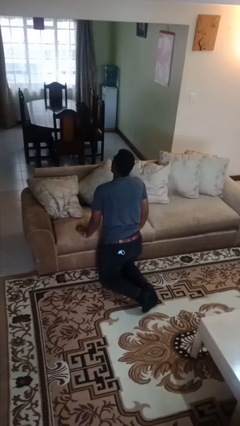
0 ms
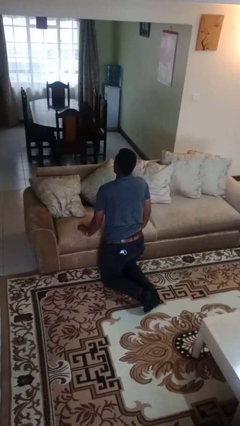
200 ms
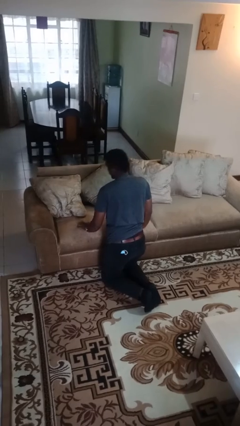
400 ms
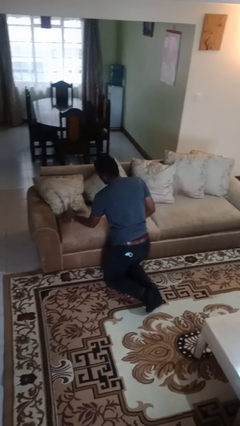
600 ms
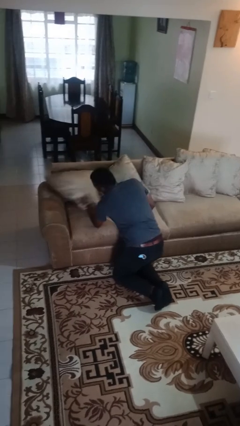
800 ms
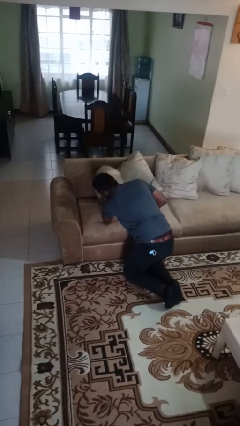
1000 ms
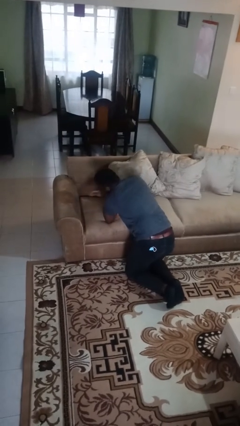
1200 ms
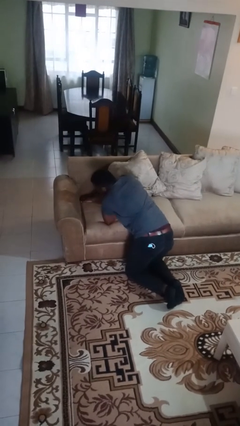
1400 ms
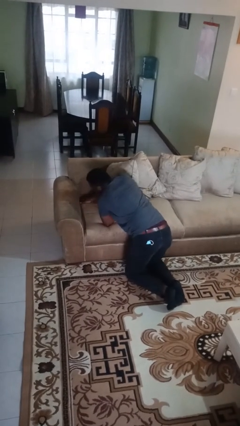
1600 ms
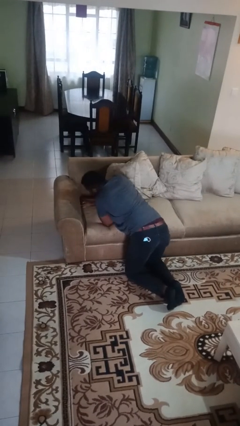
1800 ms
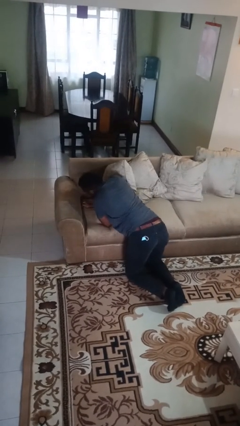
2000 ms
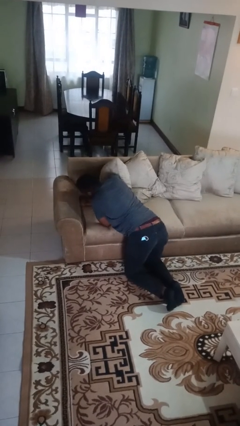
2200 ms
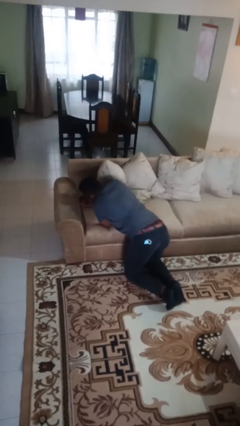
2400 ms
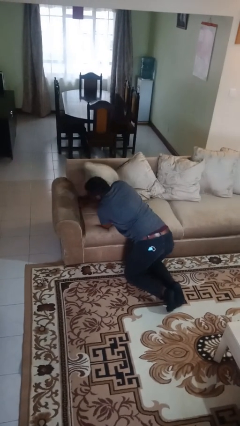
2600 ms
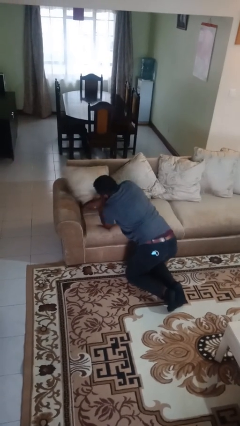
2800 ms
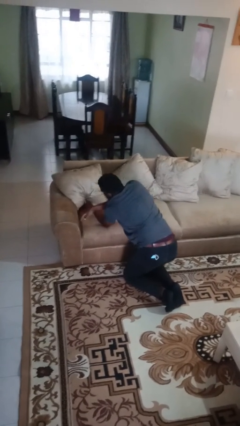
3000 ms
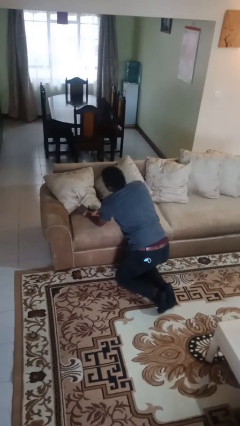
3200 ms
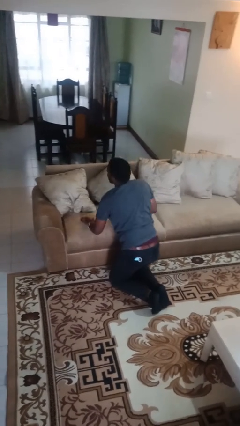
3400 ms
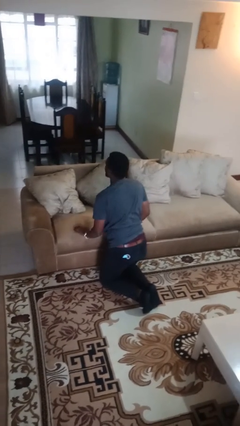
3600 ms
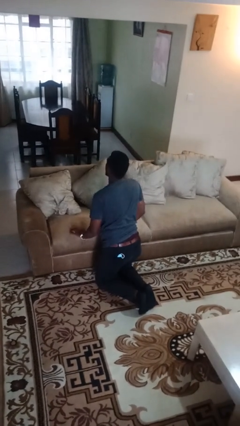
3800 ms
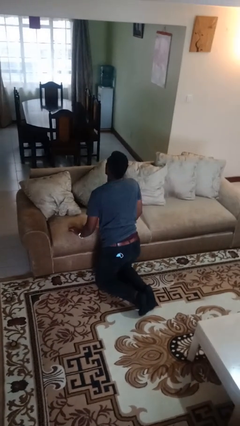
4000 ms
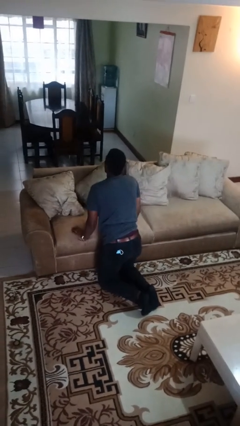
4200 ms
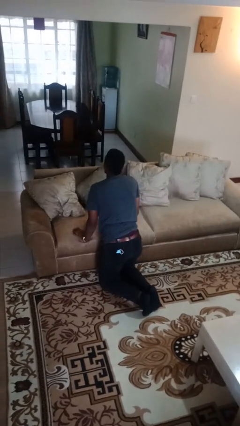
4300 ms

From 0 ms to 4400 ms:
person searches in couch

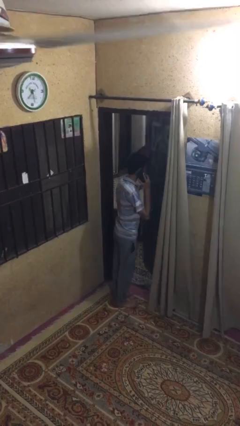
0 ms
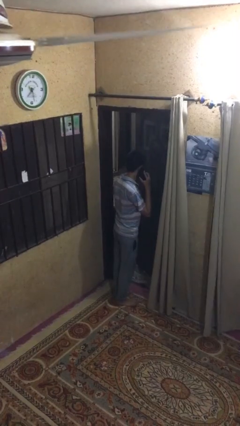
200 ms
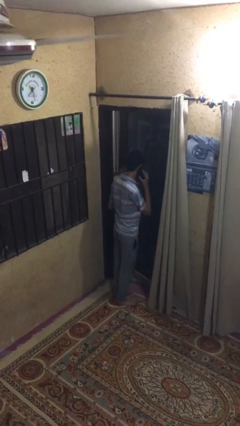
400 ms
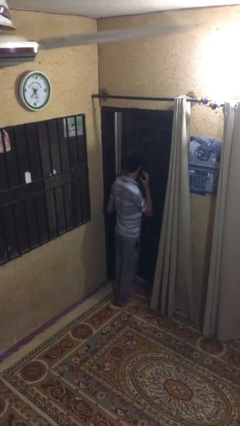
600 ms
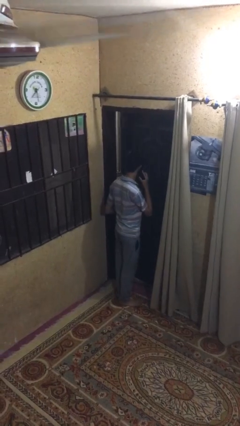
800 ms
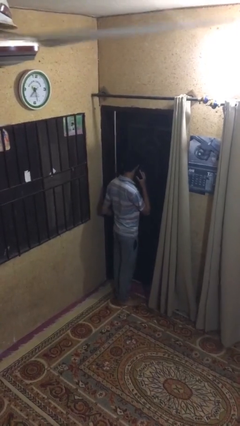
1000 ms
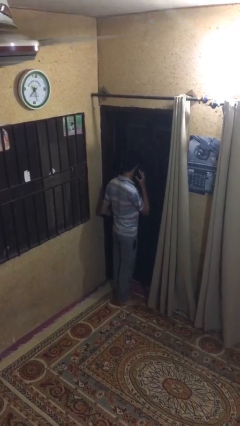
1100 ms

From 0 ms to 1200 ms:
person closes facility door

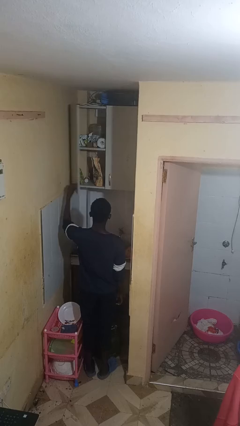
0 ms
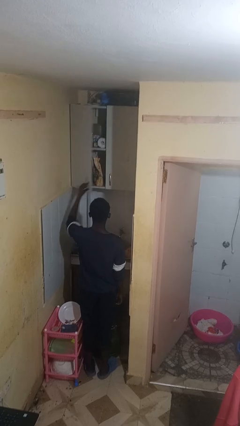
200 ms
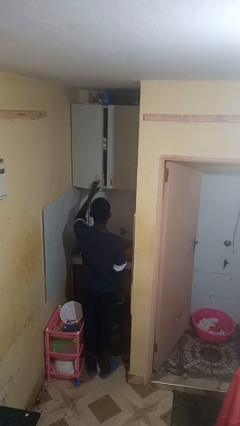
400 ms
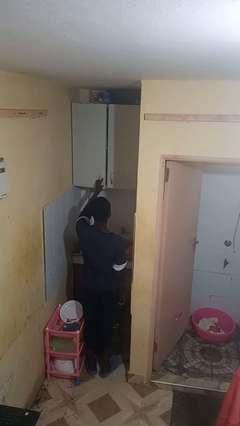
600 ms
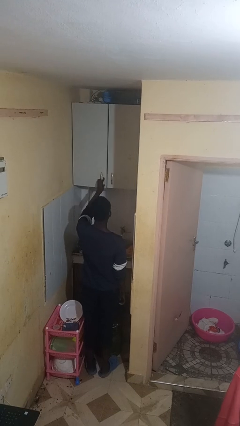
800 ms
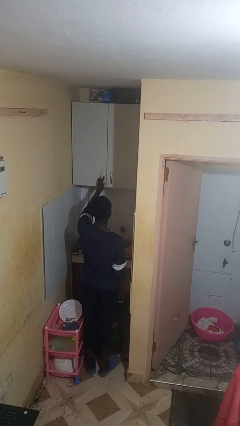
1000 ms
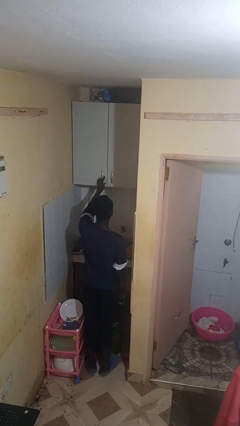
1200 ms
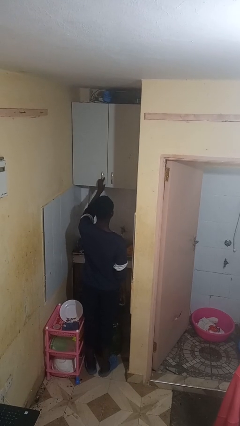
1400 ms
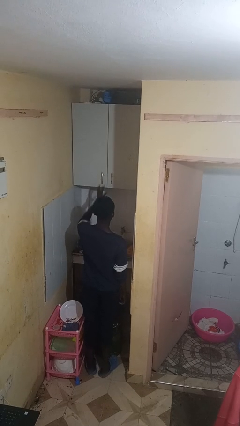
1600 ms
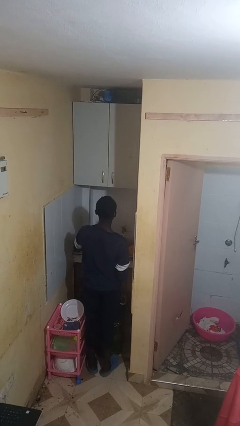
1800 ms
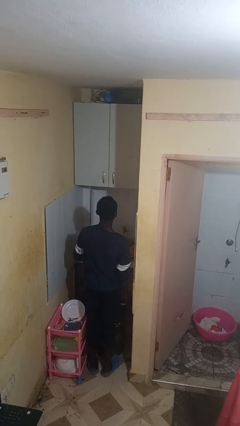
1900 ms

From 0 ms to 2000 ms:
person closes cabinet

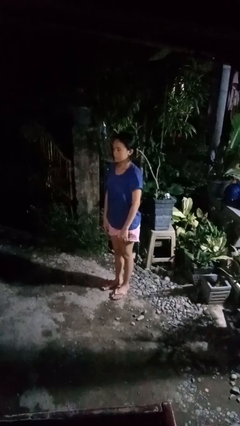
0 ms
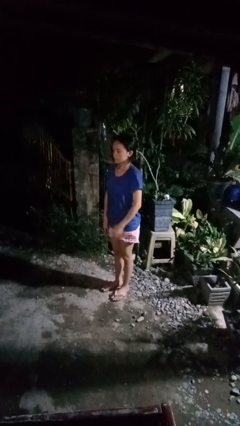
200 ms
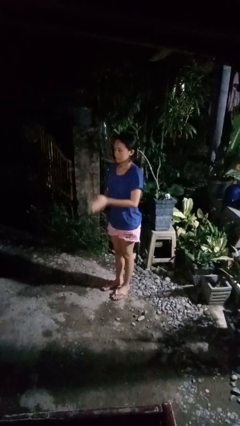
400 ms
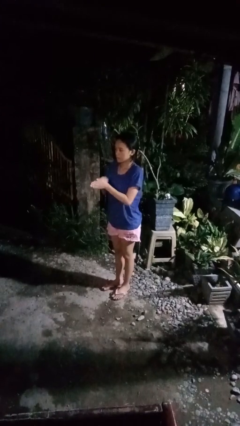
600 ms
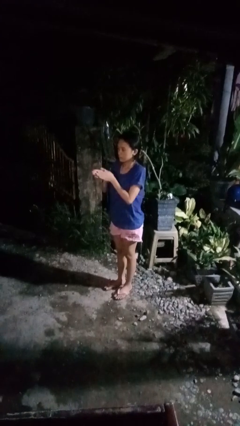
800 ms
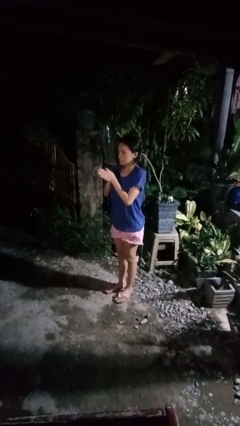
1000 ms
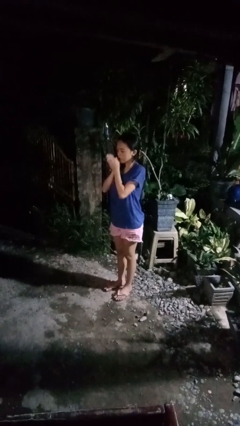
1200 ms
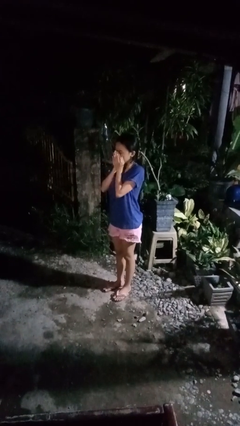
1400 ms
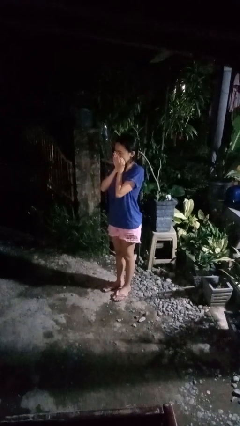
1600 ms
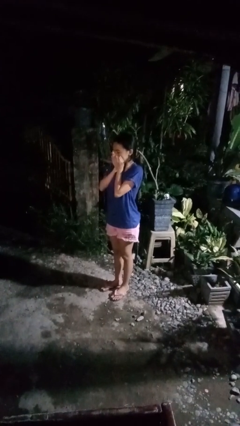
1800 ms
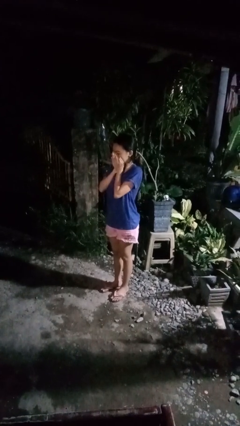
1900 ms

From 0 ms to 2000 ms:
person blows into hands

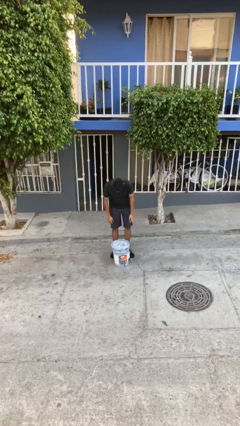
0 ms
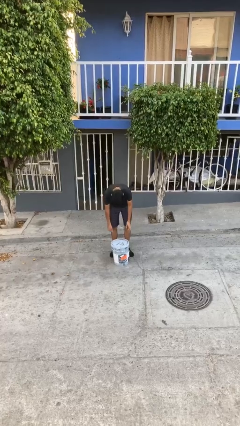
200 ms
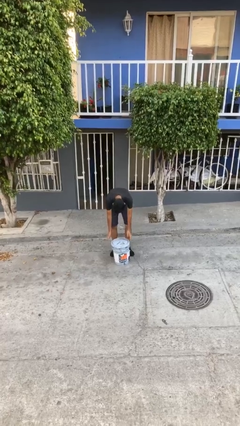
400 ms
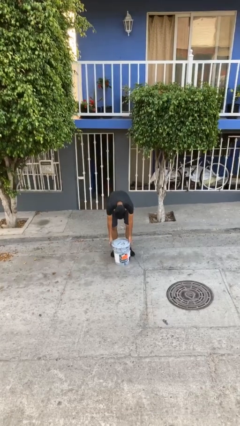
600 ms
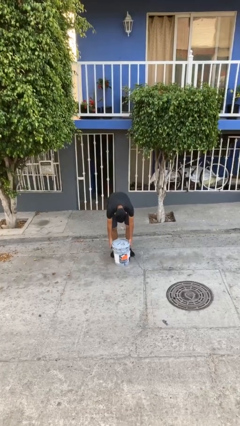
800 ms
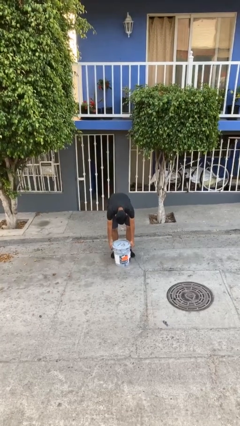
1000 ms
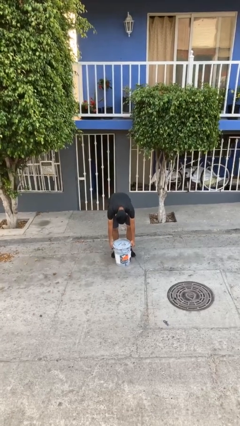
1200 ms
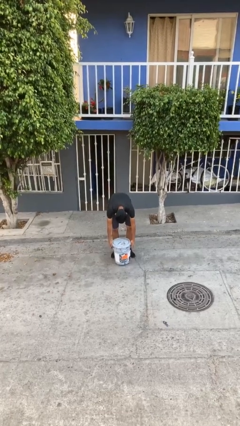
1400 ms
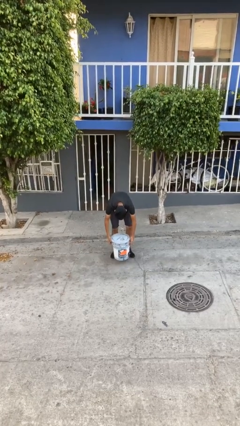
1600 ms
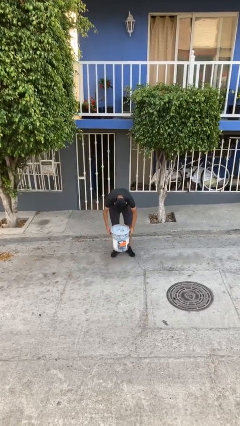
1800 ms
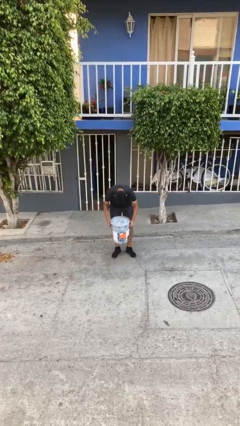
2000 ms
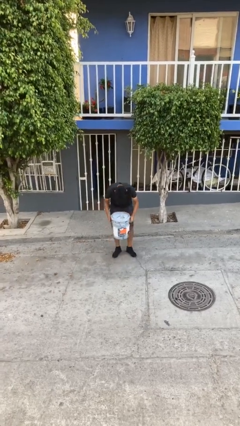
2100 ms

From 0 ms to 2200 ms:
person picks up object from floor

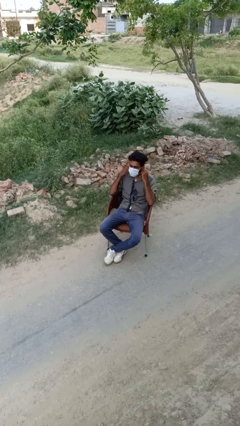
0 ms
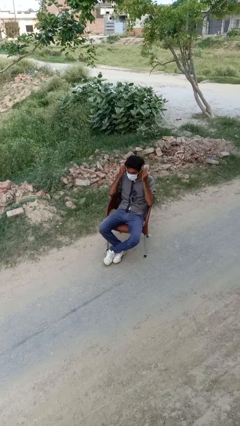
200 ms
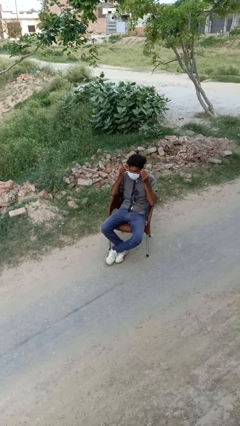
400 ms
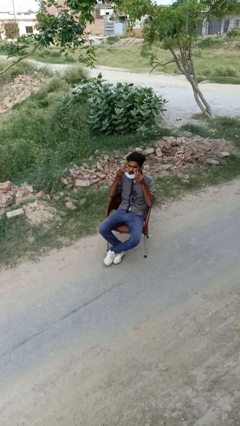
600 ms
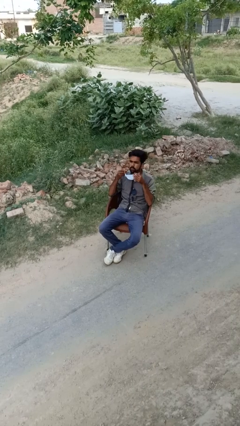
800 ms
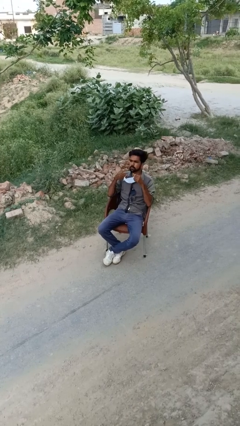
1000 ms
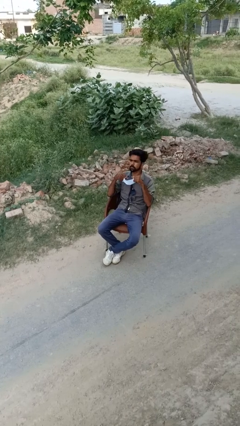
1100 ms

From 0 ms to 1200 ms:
person takes off facemask

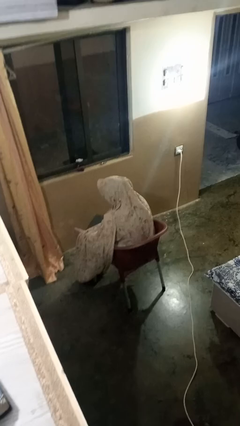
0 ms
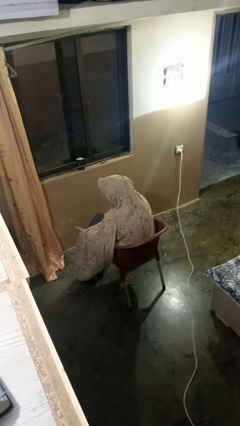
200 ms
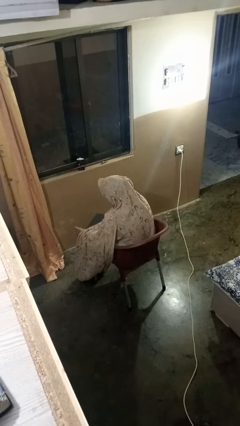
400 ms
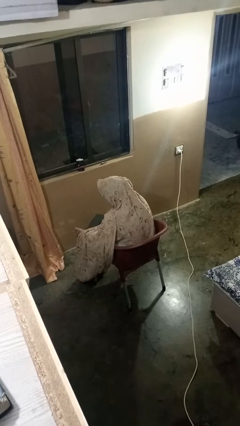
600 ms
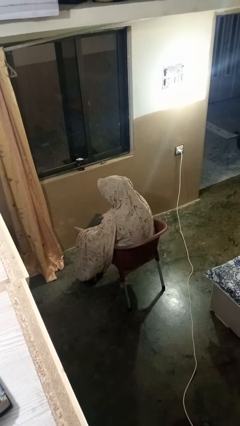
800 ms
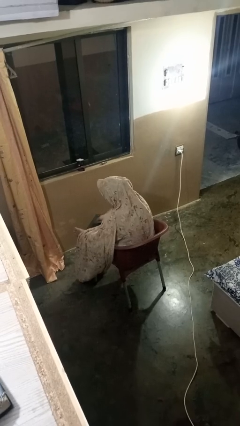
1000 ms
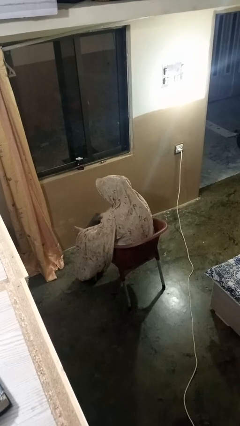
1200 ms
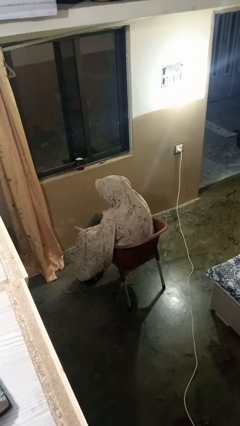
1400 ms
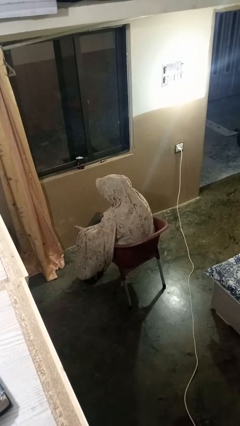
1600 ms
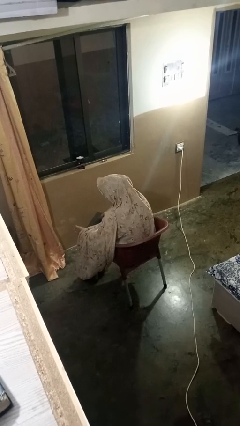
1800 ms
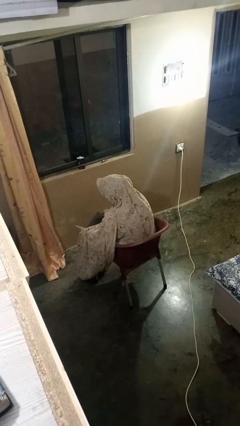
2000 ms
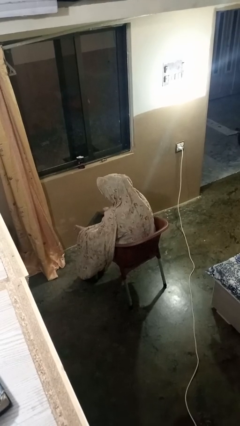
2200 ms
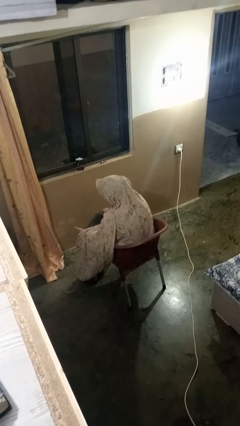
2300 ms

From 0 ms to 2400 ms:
person interacts with tablet

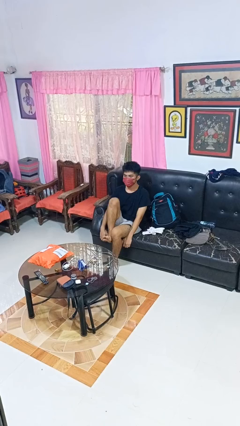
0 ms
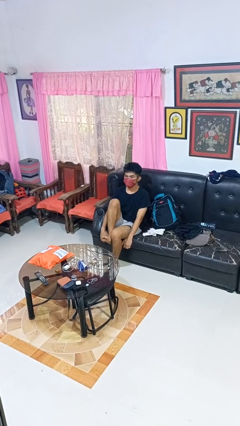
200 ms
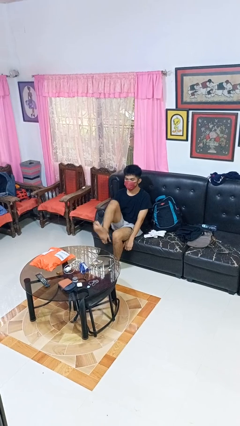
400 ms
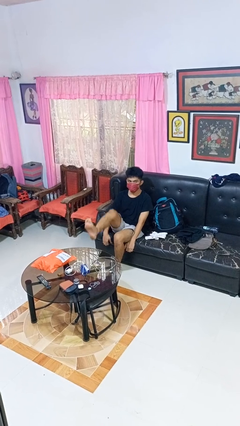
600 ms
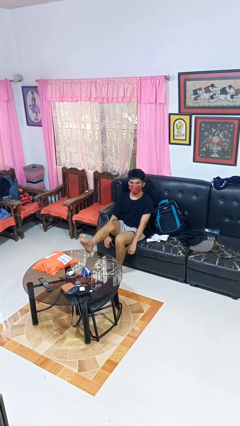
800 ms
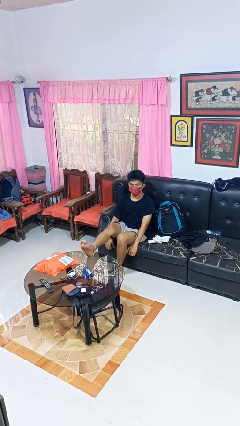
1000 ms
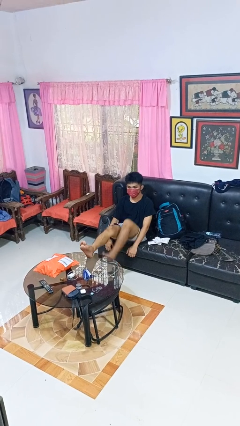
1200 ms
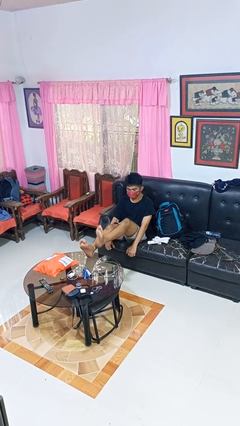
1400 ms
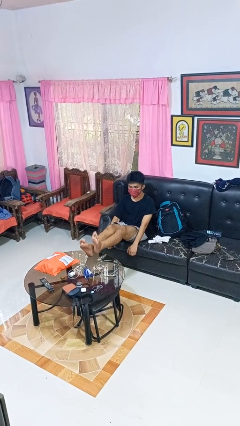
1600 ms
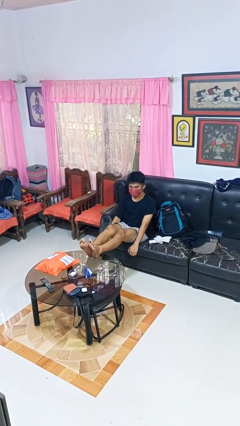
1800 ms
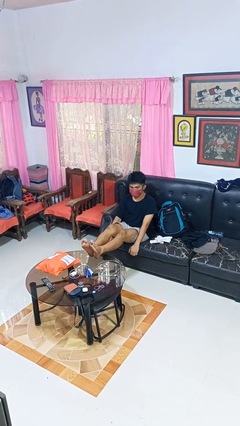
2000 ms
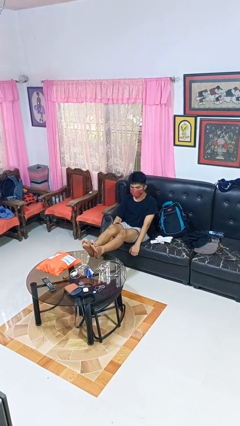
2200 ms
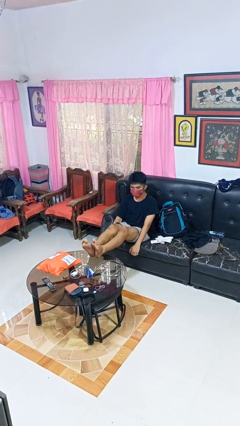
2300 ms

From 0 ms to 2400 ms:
person puts feet up
